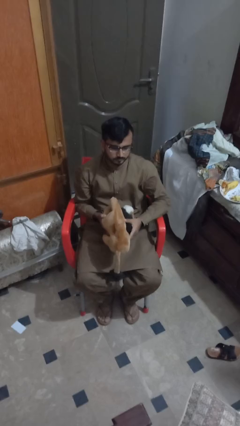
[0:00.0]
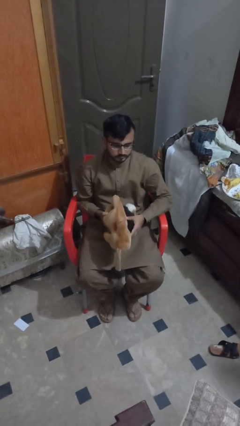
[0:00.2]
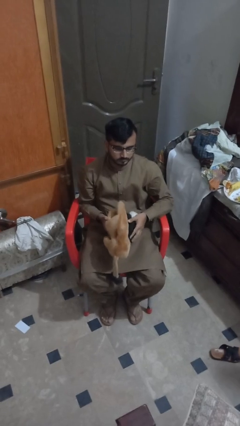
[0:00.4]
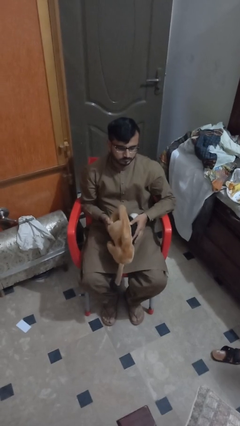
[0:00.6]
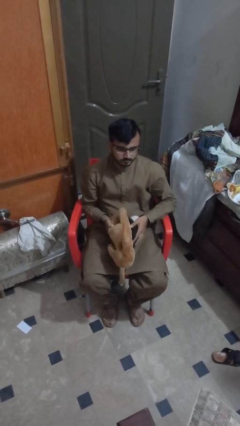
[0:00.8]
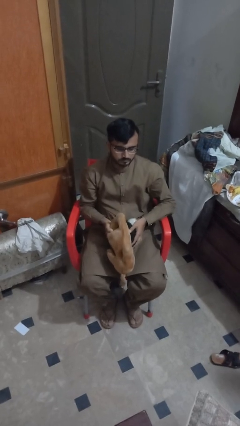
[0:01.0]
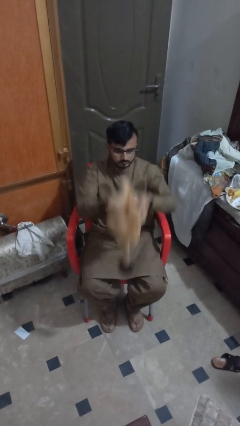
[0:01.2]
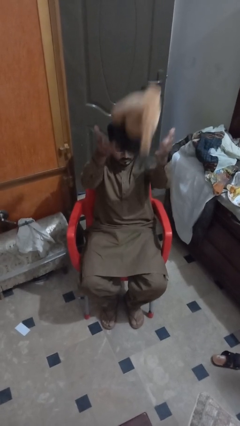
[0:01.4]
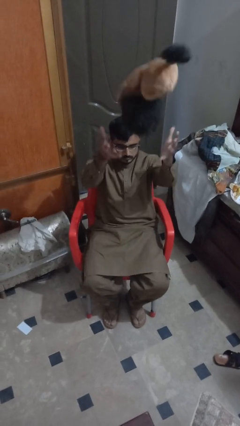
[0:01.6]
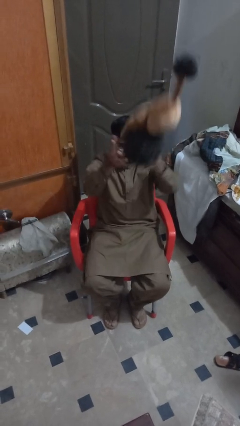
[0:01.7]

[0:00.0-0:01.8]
person drops object

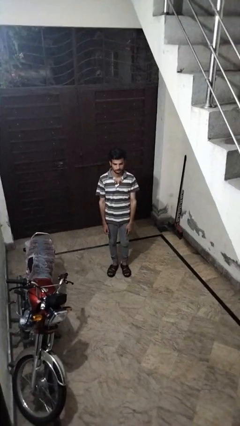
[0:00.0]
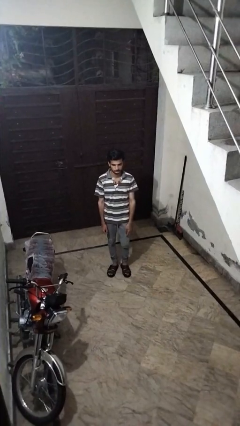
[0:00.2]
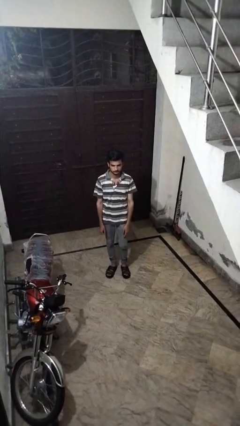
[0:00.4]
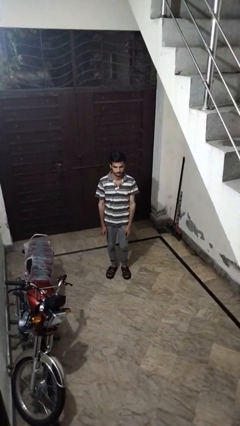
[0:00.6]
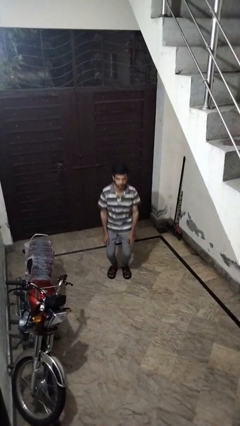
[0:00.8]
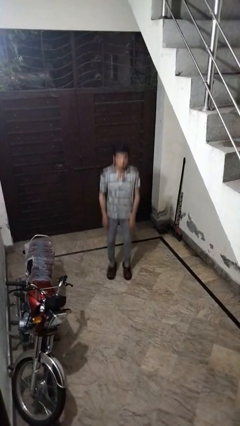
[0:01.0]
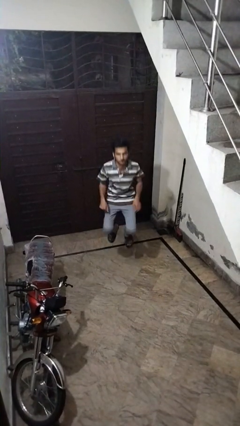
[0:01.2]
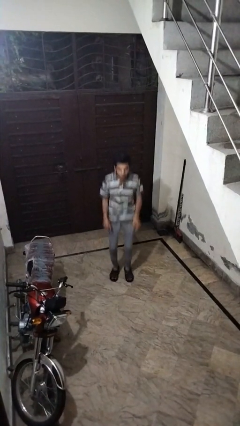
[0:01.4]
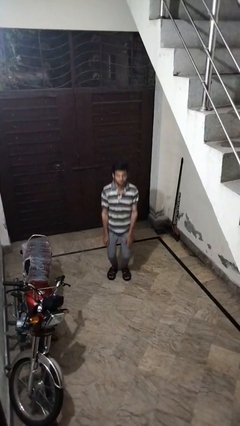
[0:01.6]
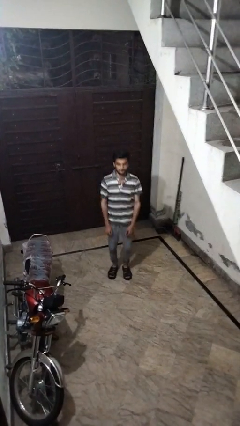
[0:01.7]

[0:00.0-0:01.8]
person jumps

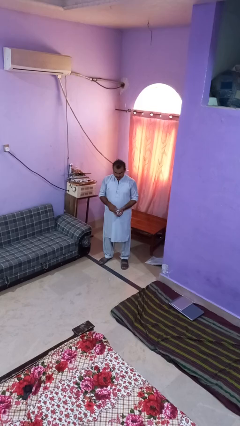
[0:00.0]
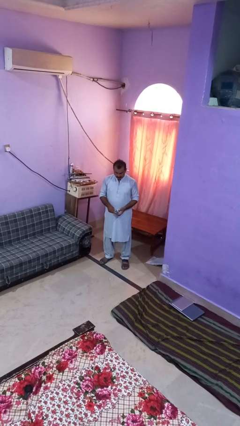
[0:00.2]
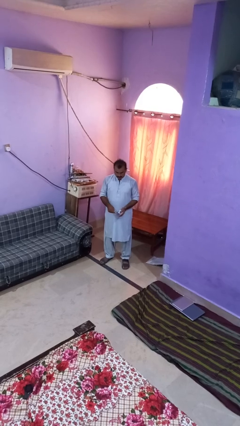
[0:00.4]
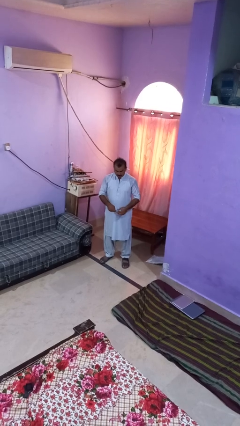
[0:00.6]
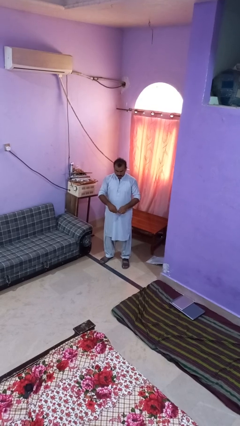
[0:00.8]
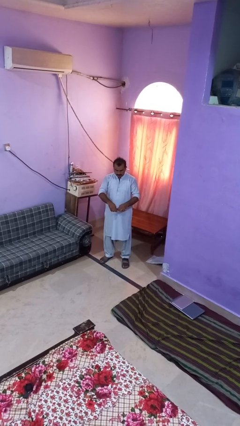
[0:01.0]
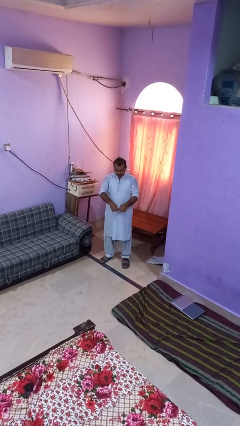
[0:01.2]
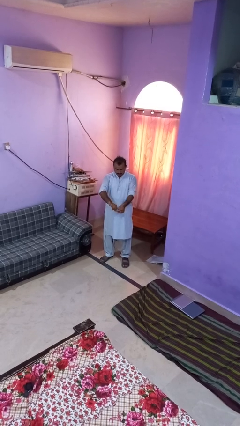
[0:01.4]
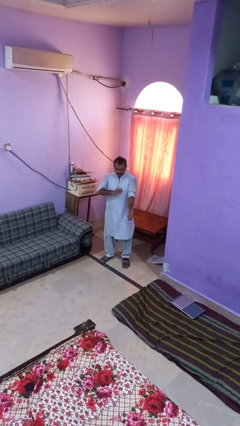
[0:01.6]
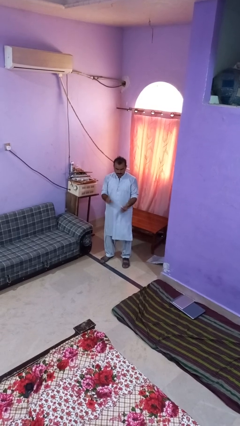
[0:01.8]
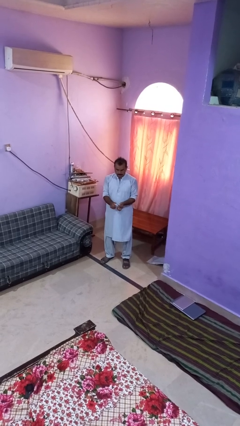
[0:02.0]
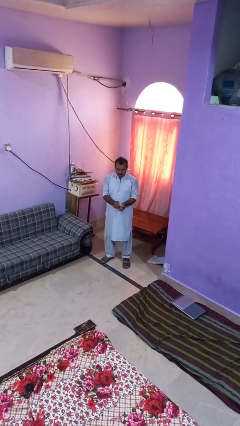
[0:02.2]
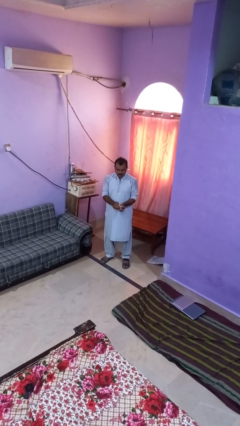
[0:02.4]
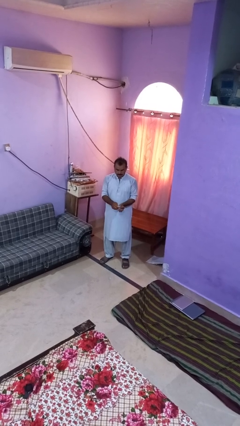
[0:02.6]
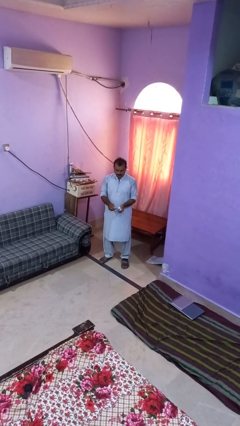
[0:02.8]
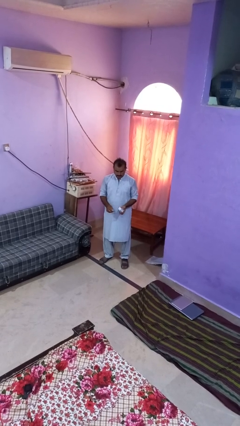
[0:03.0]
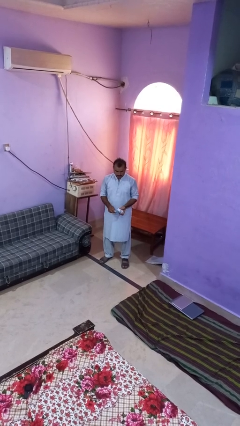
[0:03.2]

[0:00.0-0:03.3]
person tears paper

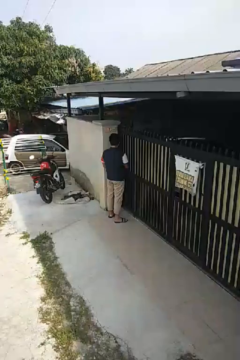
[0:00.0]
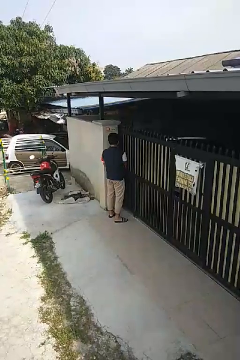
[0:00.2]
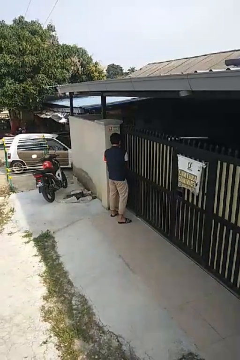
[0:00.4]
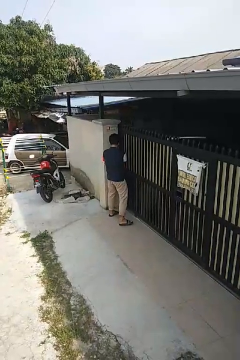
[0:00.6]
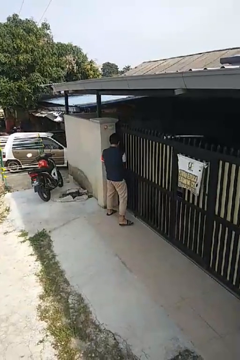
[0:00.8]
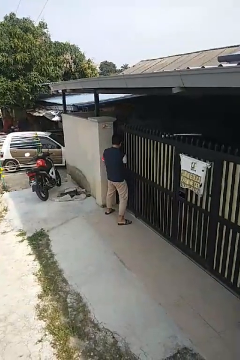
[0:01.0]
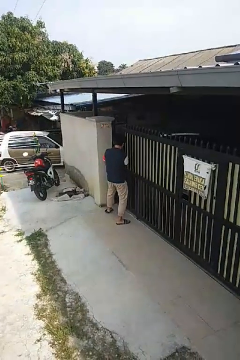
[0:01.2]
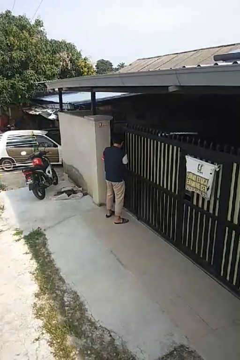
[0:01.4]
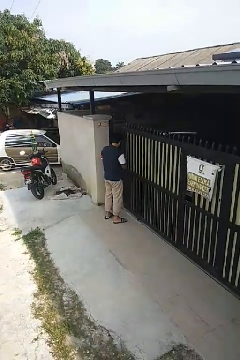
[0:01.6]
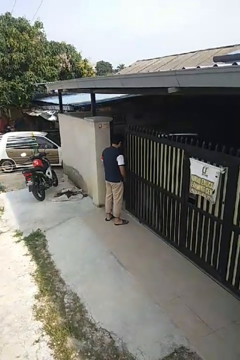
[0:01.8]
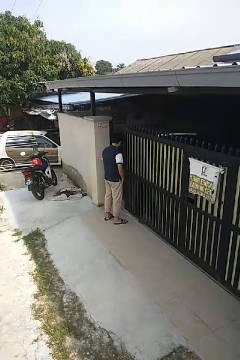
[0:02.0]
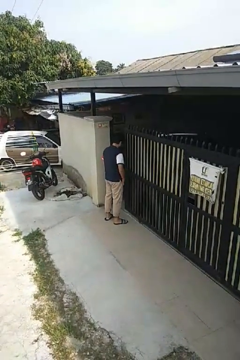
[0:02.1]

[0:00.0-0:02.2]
person opens sliding door

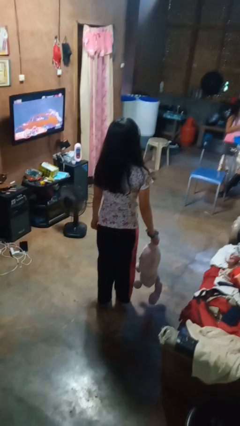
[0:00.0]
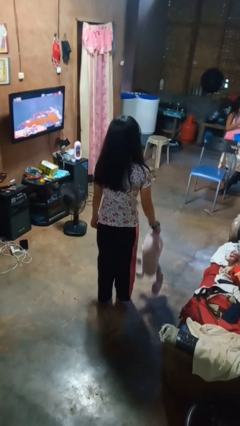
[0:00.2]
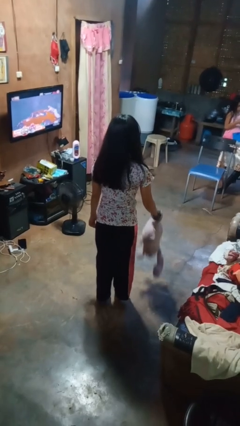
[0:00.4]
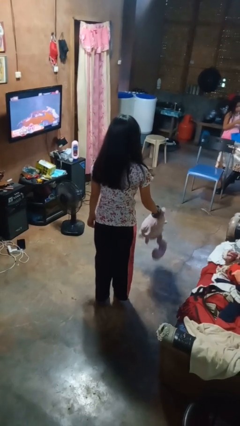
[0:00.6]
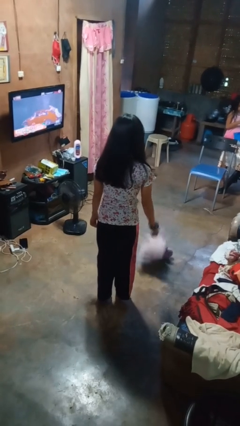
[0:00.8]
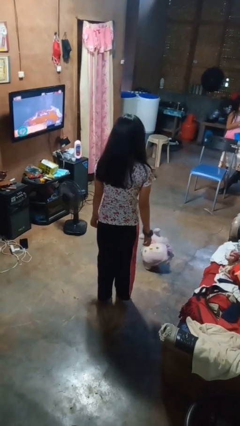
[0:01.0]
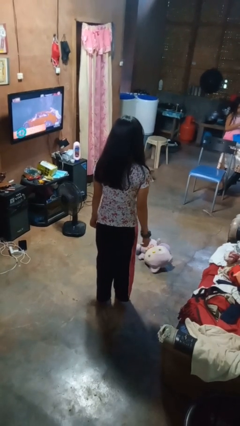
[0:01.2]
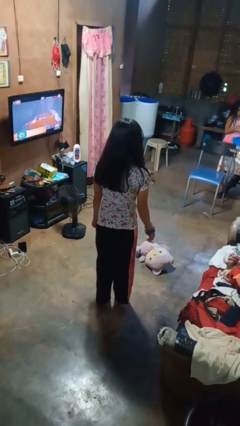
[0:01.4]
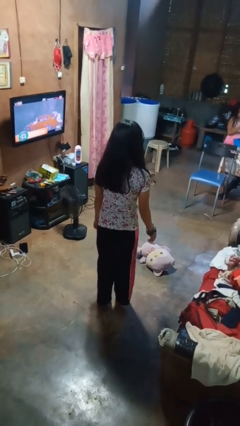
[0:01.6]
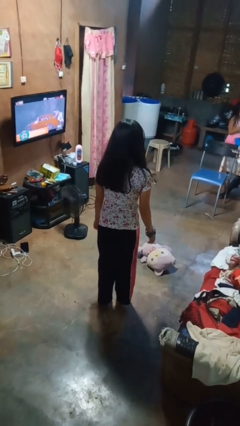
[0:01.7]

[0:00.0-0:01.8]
person throws object to ground

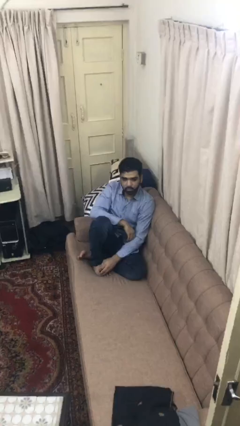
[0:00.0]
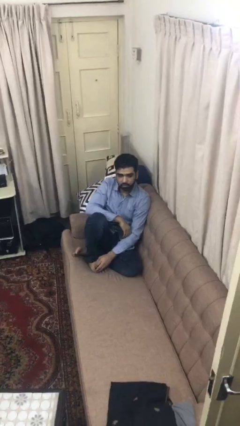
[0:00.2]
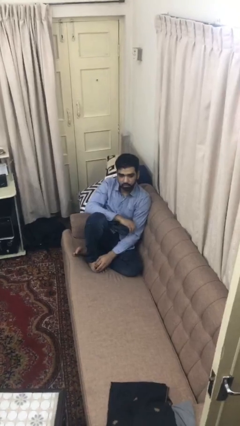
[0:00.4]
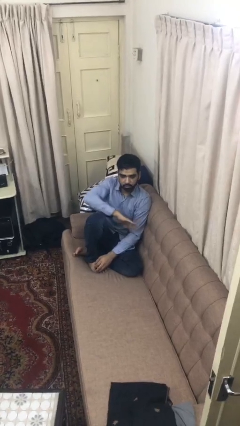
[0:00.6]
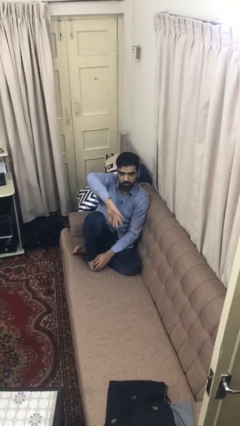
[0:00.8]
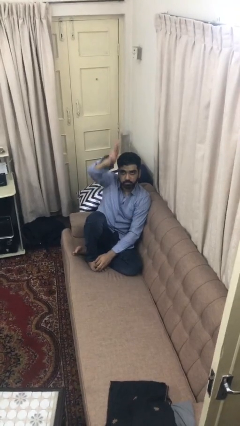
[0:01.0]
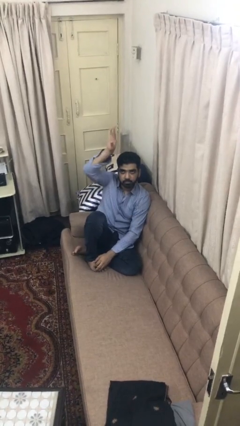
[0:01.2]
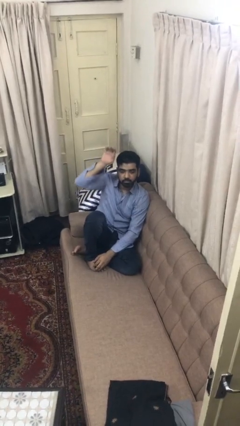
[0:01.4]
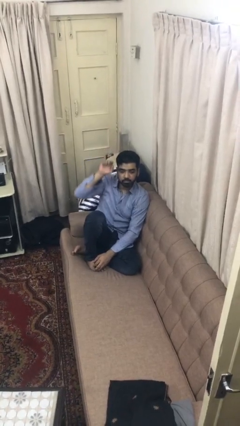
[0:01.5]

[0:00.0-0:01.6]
person gestures swipe up

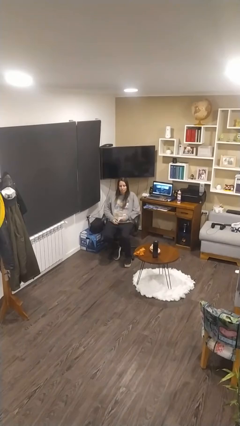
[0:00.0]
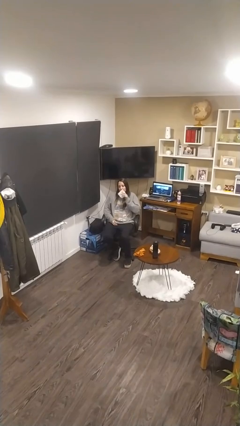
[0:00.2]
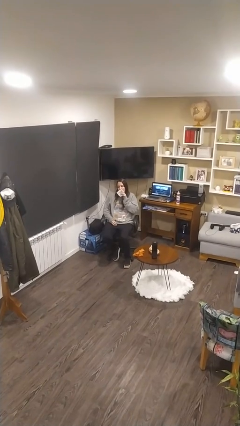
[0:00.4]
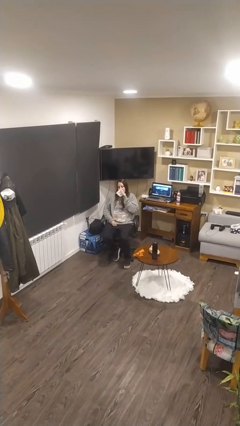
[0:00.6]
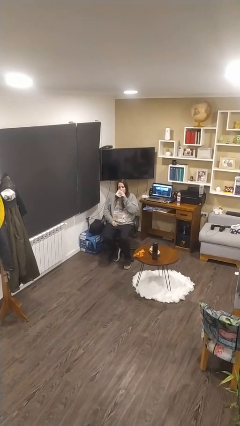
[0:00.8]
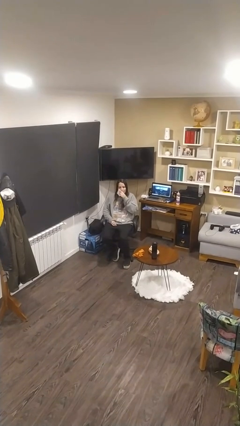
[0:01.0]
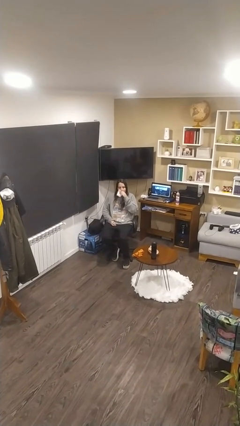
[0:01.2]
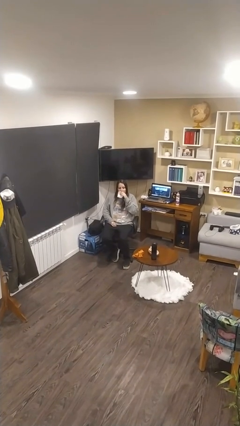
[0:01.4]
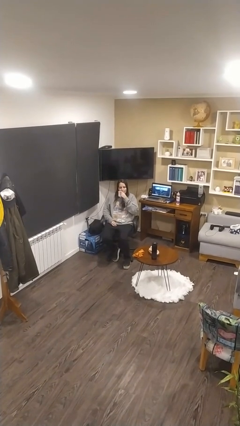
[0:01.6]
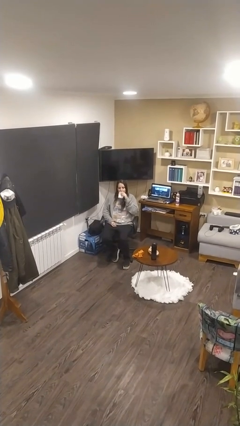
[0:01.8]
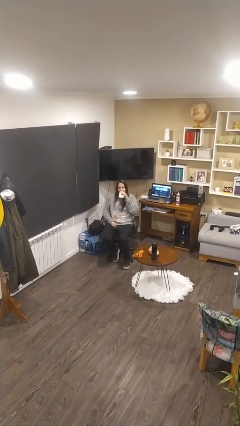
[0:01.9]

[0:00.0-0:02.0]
person wipes mouth with napkin

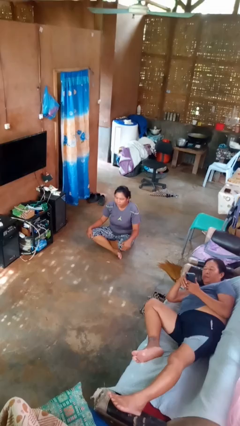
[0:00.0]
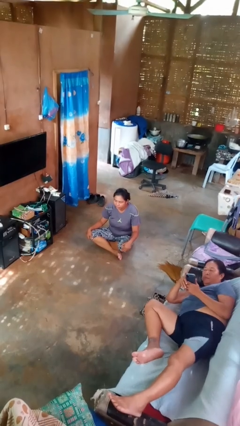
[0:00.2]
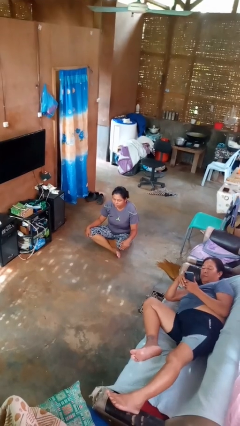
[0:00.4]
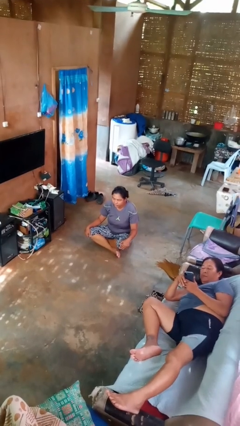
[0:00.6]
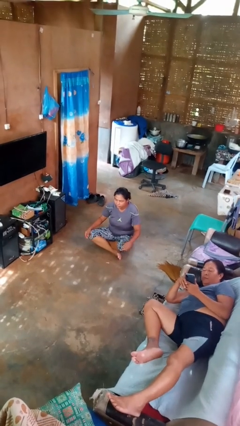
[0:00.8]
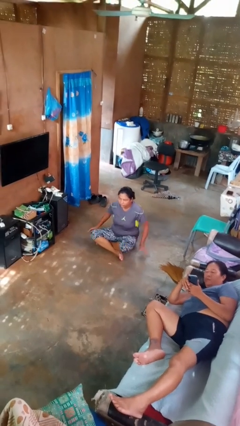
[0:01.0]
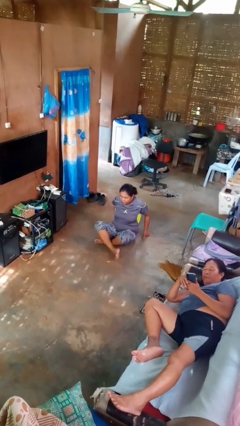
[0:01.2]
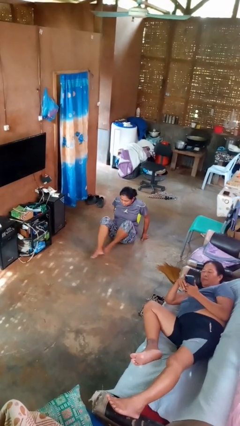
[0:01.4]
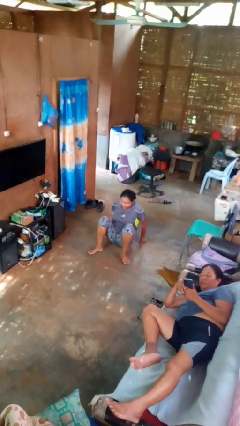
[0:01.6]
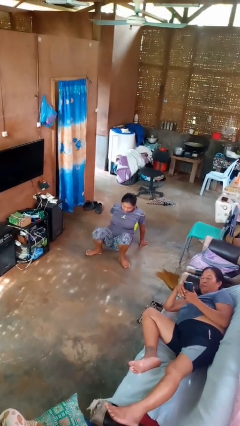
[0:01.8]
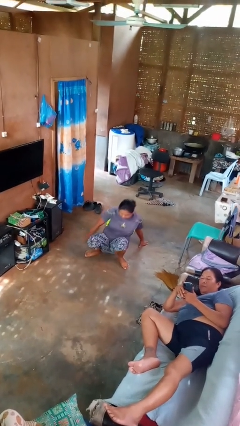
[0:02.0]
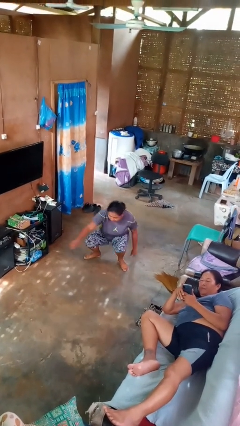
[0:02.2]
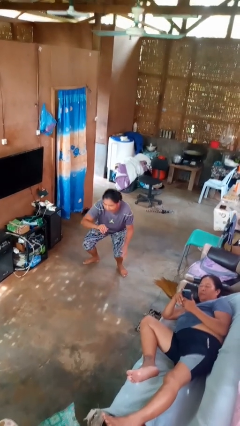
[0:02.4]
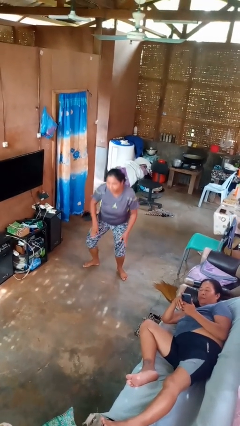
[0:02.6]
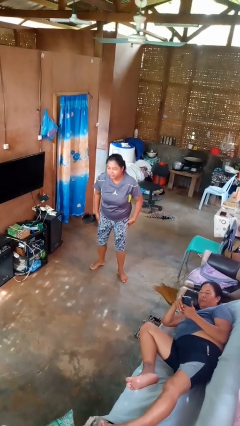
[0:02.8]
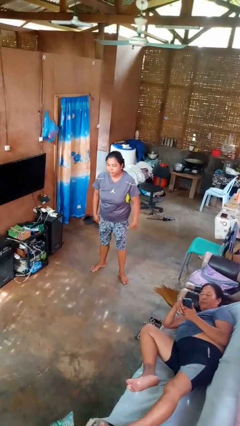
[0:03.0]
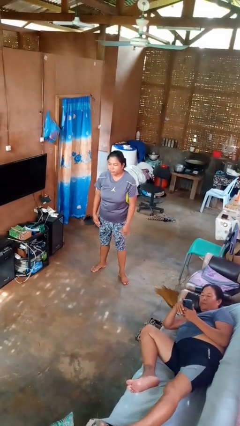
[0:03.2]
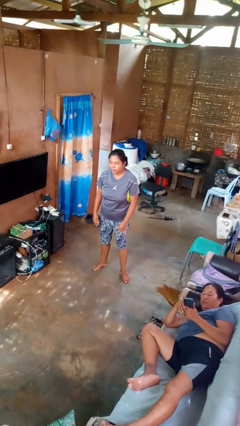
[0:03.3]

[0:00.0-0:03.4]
person stands up from floor
